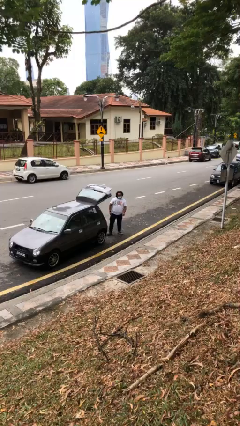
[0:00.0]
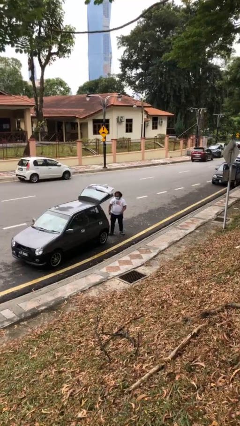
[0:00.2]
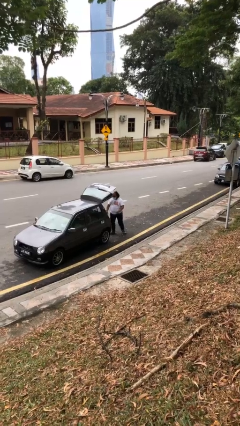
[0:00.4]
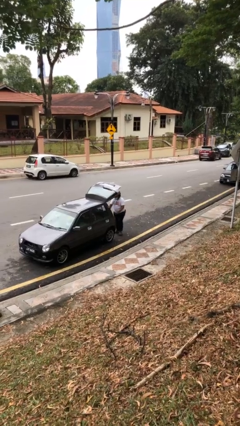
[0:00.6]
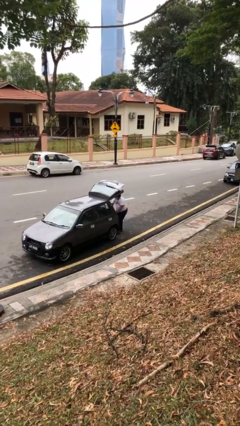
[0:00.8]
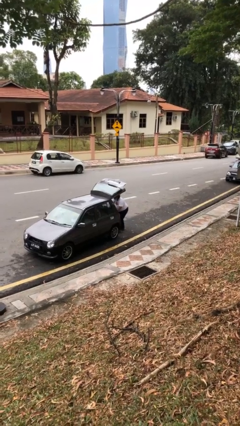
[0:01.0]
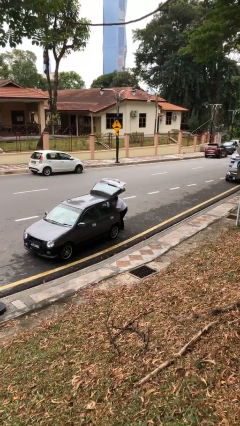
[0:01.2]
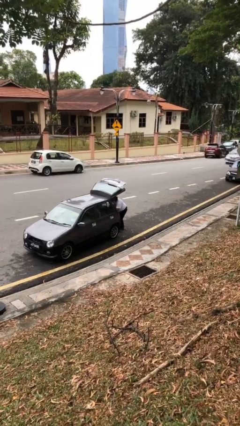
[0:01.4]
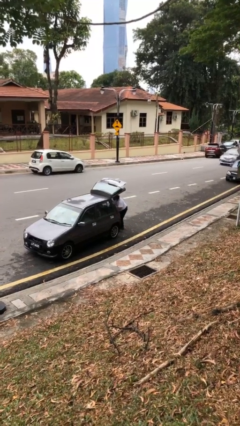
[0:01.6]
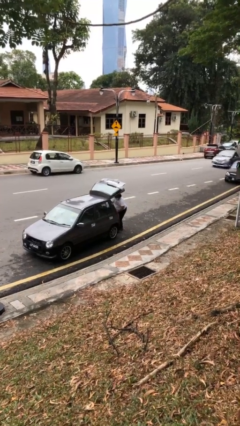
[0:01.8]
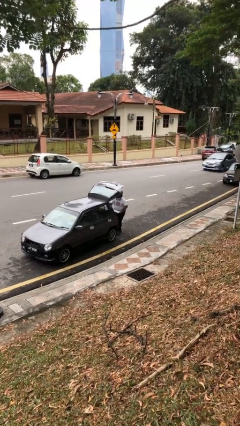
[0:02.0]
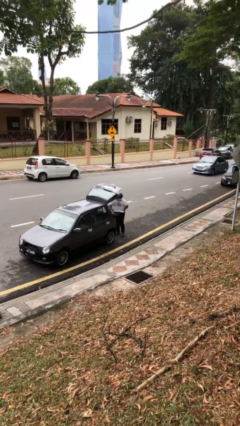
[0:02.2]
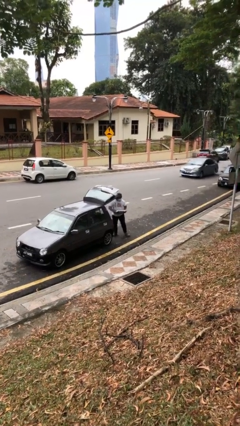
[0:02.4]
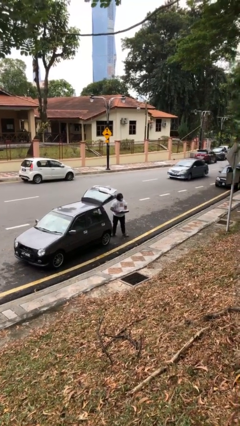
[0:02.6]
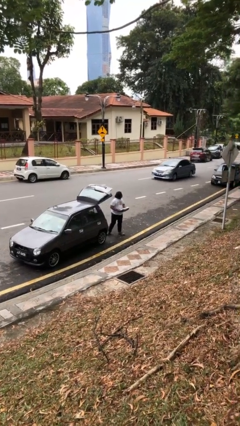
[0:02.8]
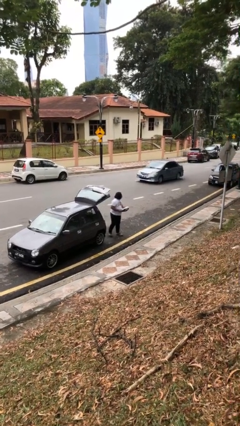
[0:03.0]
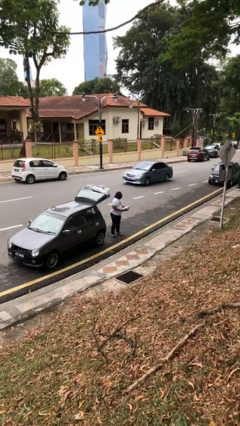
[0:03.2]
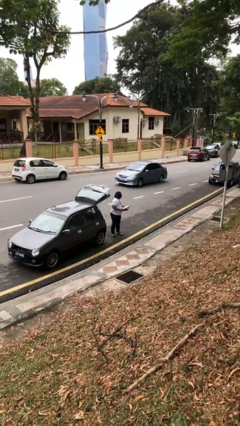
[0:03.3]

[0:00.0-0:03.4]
person unloads car

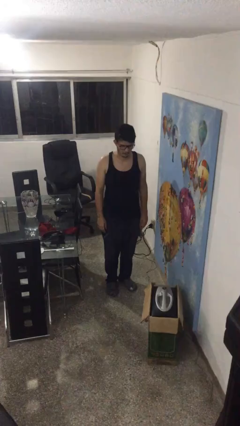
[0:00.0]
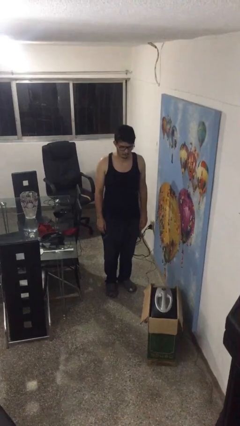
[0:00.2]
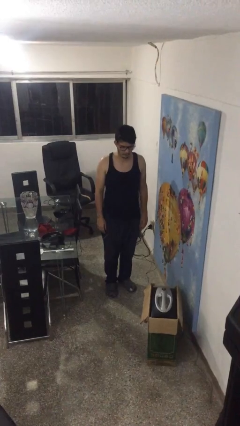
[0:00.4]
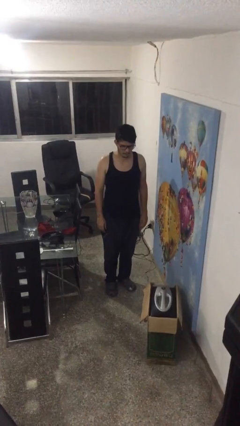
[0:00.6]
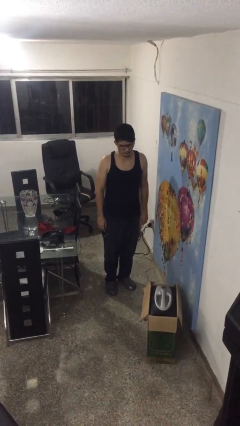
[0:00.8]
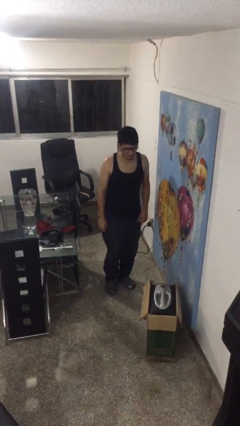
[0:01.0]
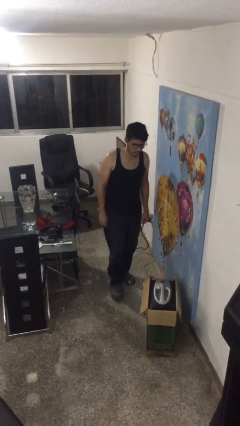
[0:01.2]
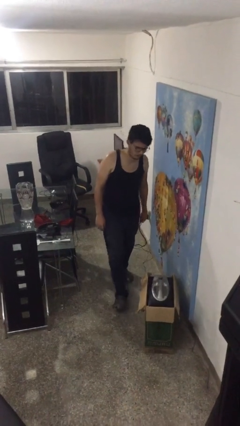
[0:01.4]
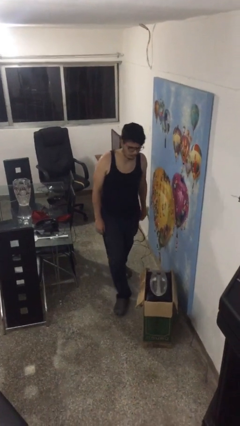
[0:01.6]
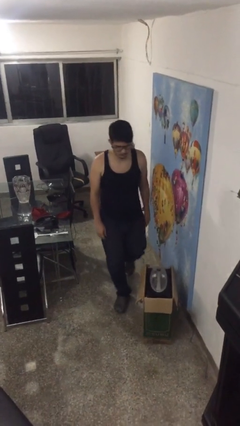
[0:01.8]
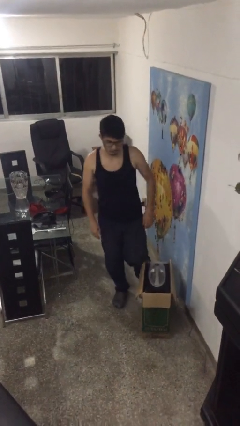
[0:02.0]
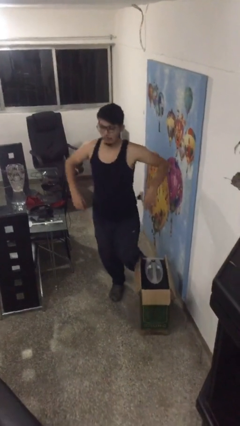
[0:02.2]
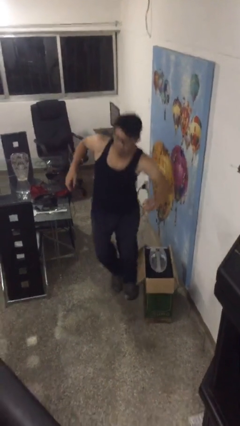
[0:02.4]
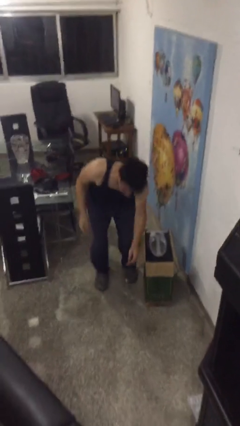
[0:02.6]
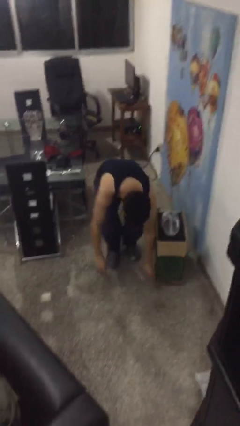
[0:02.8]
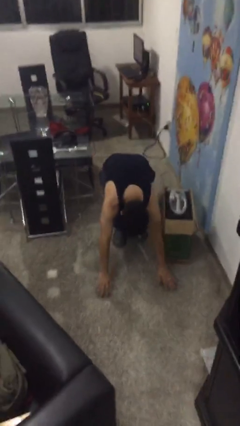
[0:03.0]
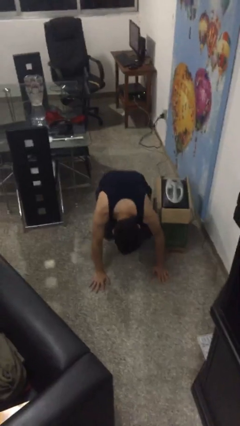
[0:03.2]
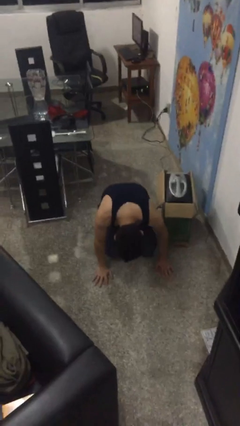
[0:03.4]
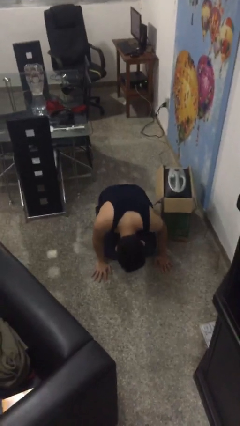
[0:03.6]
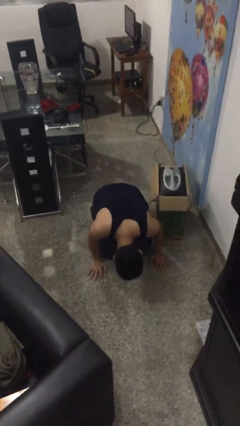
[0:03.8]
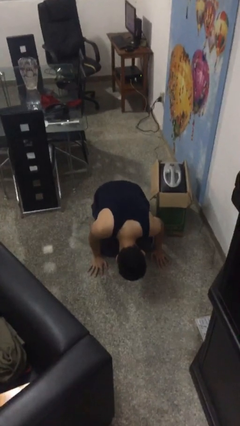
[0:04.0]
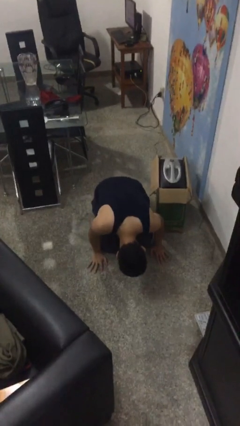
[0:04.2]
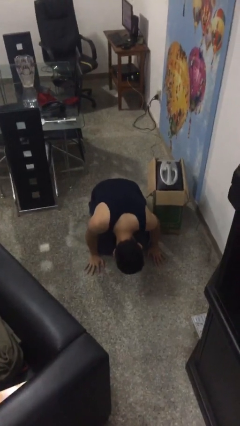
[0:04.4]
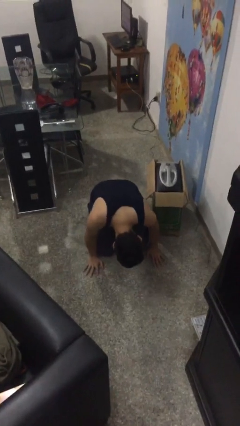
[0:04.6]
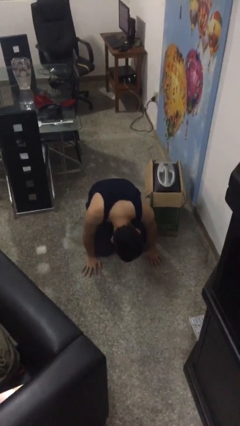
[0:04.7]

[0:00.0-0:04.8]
person trips on object on floor

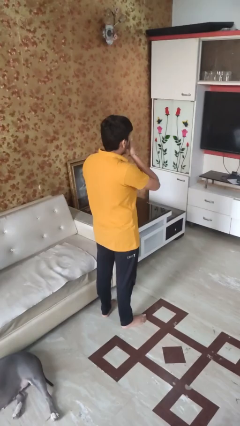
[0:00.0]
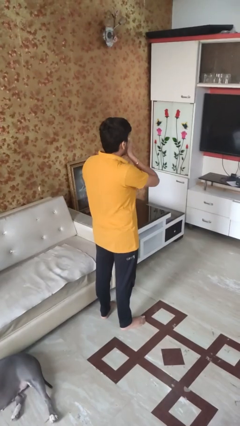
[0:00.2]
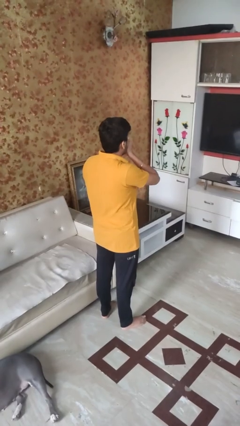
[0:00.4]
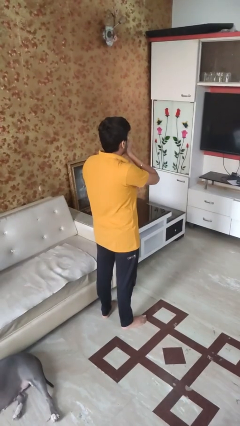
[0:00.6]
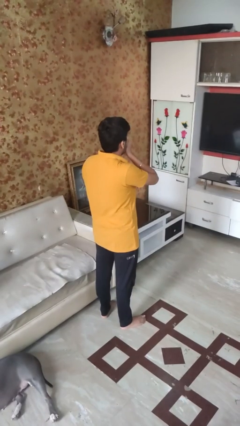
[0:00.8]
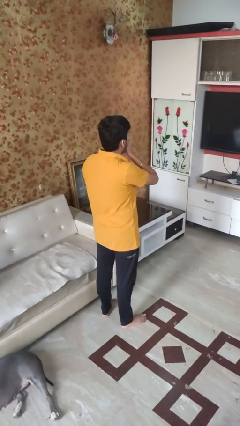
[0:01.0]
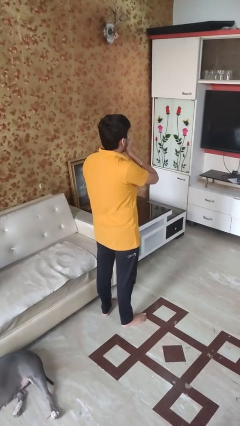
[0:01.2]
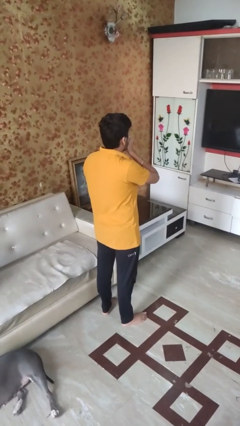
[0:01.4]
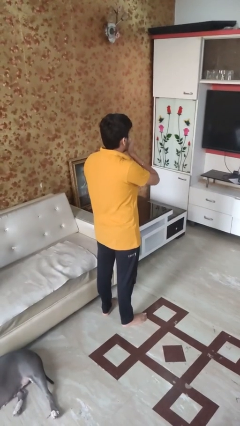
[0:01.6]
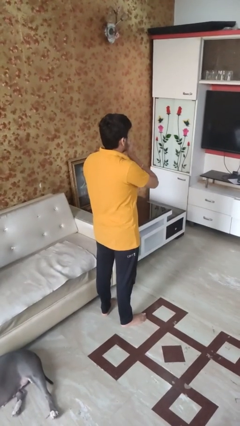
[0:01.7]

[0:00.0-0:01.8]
person yawns

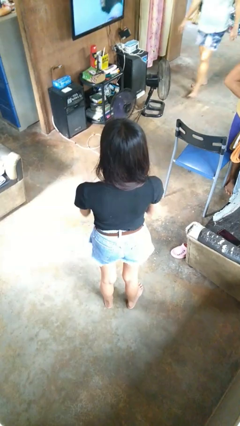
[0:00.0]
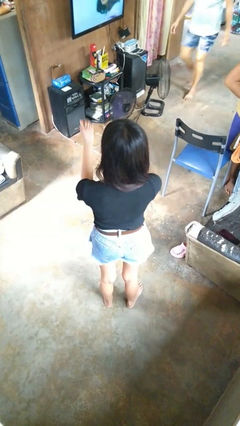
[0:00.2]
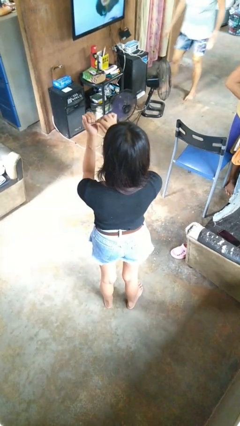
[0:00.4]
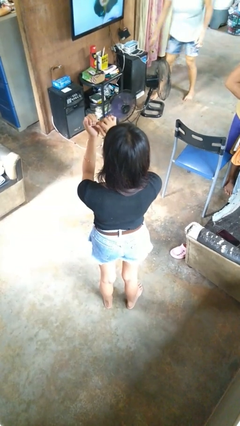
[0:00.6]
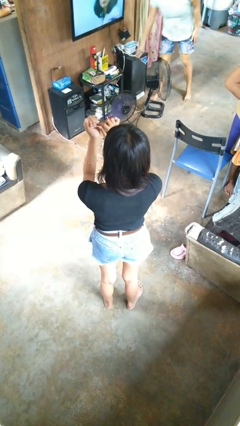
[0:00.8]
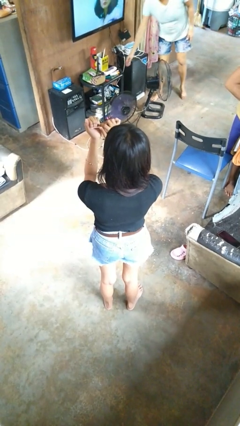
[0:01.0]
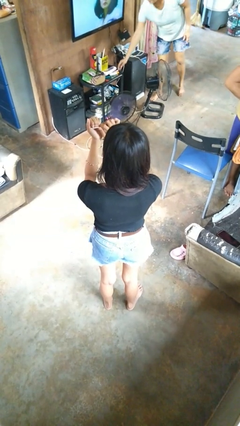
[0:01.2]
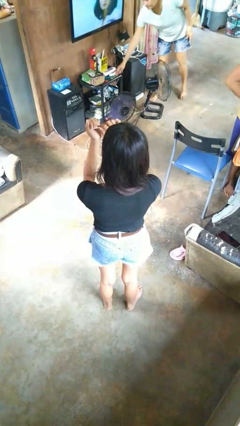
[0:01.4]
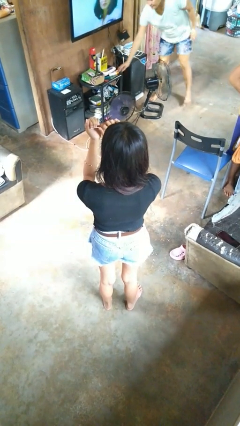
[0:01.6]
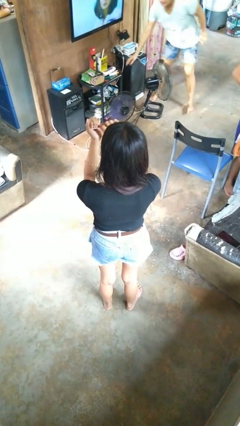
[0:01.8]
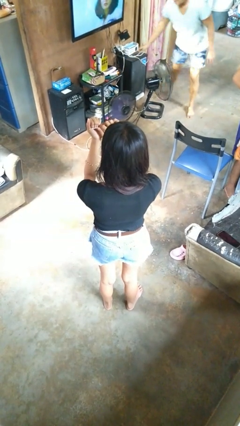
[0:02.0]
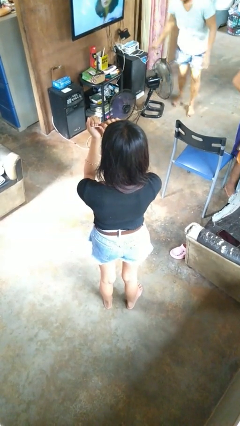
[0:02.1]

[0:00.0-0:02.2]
person files fingernails

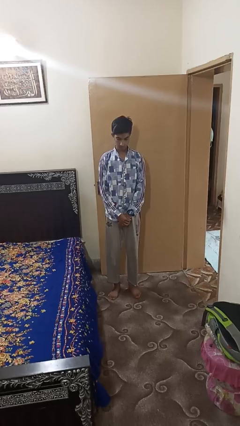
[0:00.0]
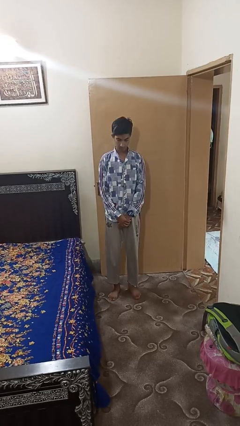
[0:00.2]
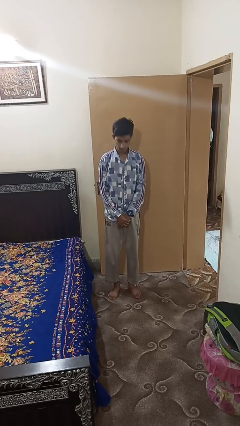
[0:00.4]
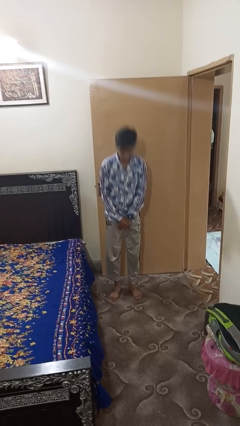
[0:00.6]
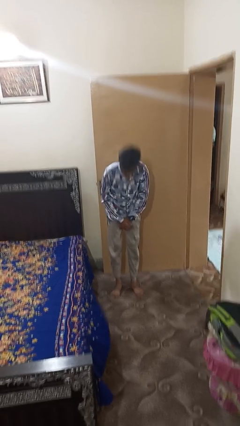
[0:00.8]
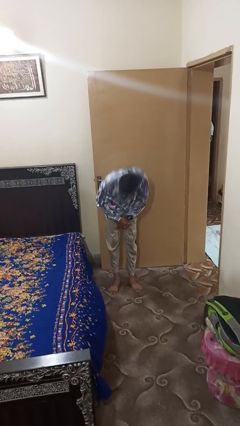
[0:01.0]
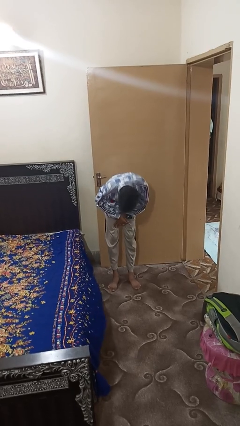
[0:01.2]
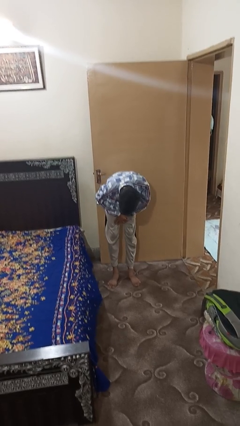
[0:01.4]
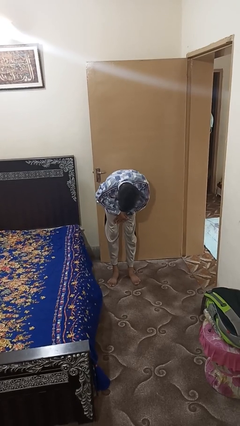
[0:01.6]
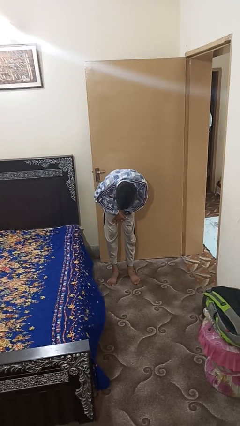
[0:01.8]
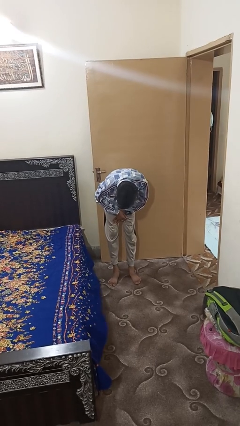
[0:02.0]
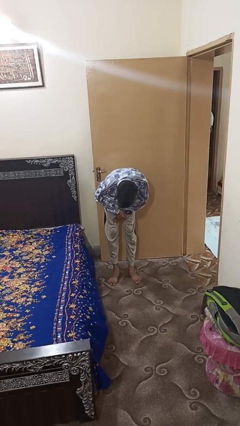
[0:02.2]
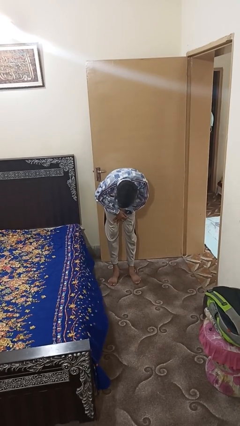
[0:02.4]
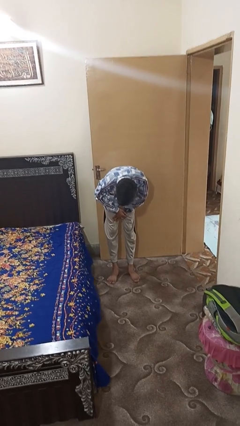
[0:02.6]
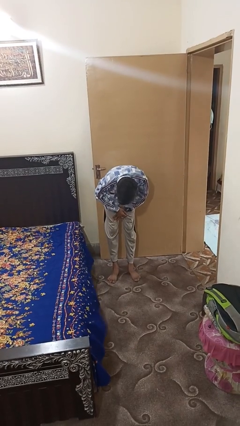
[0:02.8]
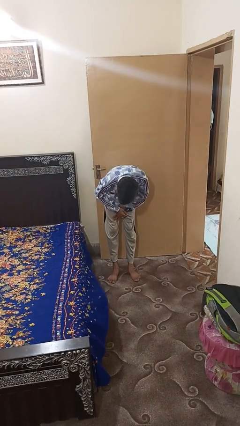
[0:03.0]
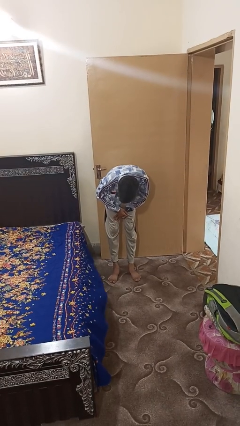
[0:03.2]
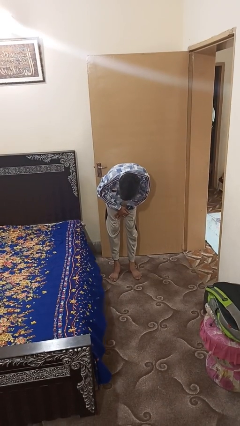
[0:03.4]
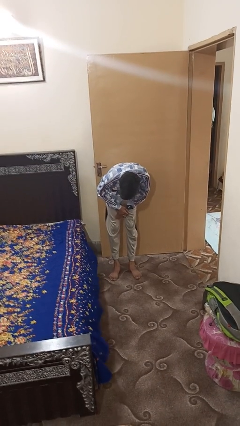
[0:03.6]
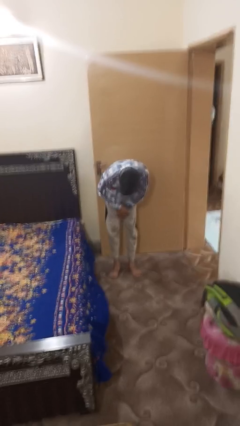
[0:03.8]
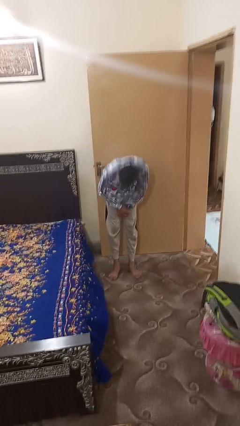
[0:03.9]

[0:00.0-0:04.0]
person bows

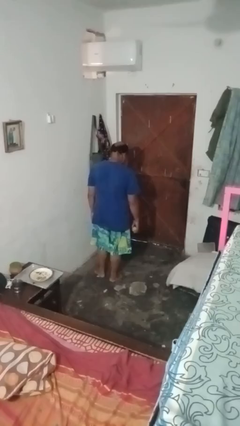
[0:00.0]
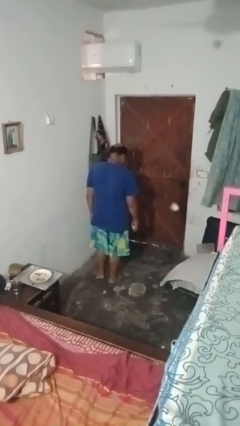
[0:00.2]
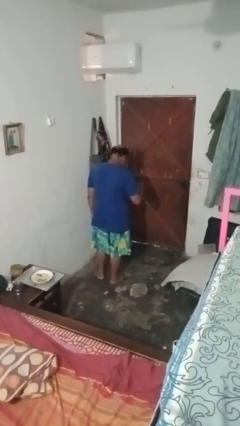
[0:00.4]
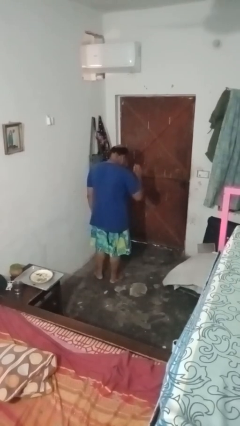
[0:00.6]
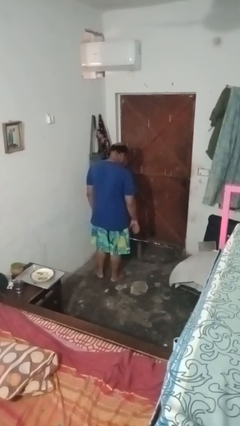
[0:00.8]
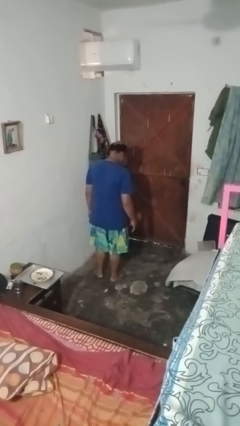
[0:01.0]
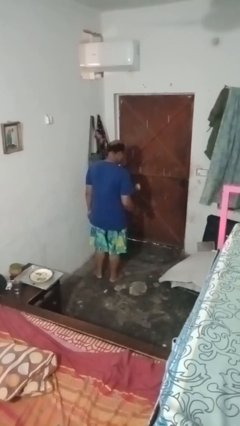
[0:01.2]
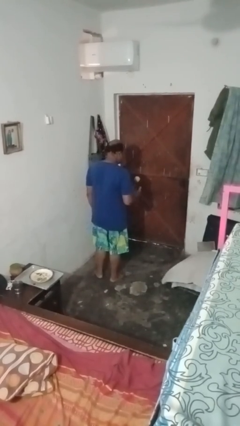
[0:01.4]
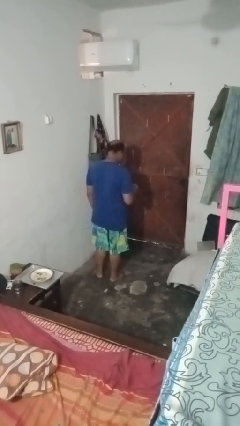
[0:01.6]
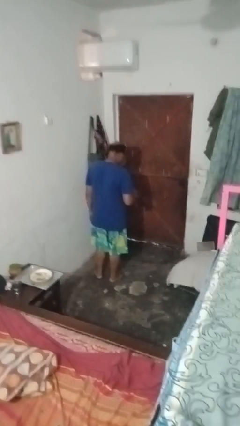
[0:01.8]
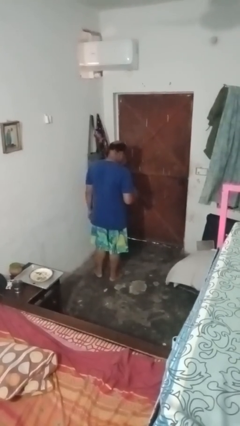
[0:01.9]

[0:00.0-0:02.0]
person bounces ball on floor
